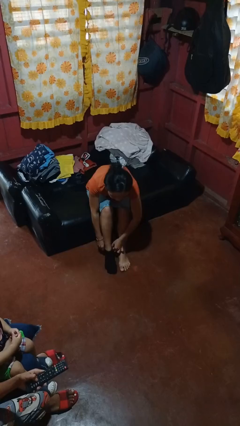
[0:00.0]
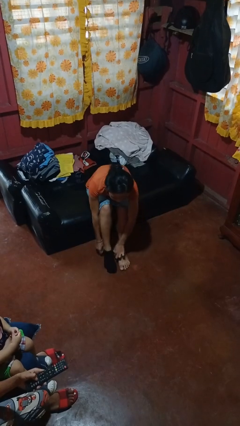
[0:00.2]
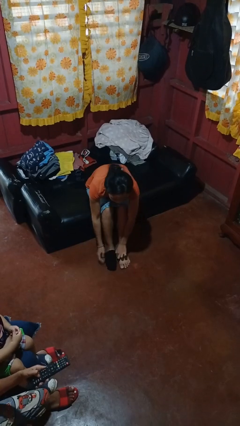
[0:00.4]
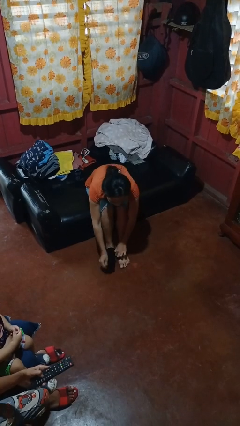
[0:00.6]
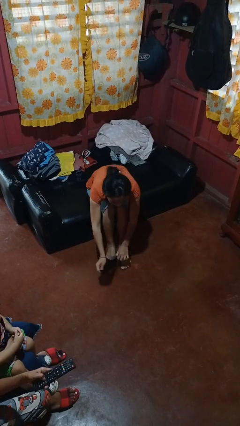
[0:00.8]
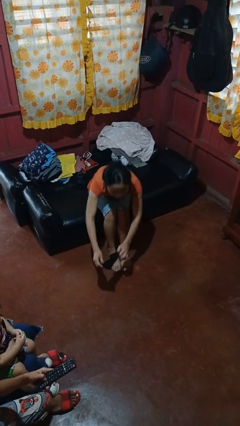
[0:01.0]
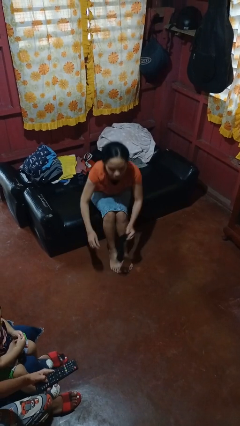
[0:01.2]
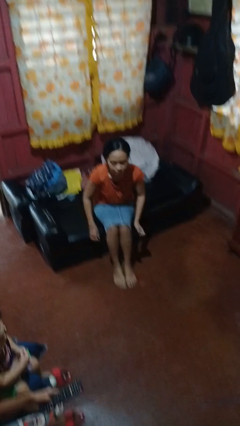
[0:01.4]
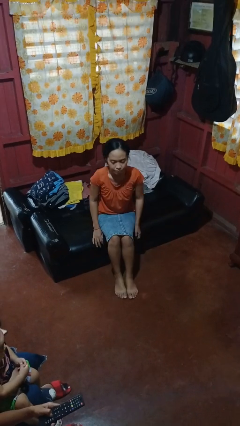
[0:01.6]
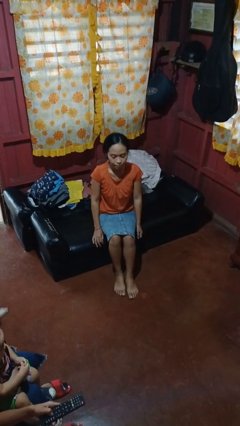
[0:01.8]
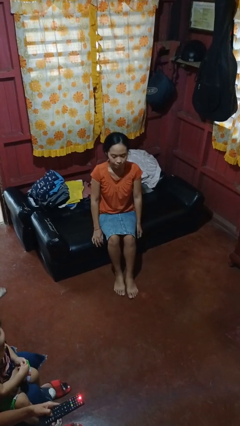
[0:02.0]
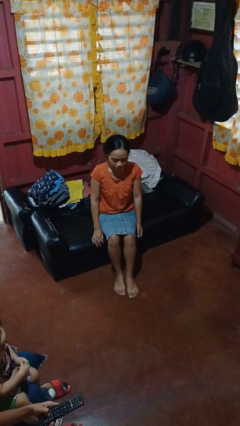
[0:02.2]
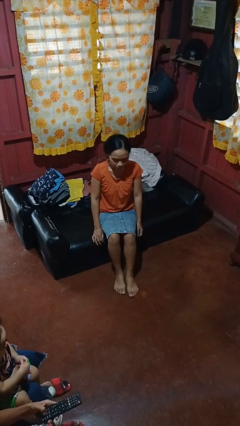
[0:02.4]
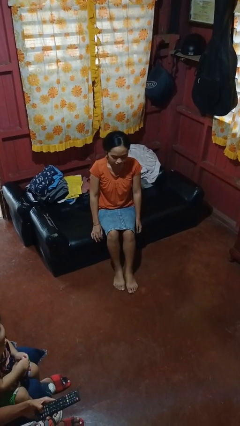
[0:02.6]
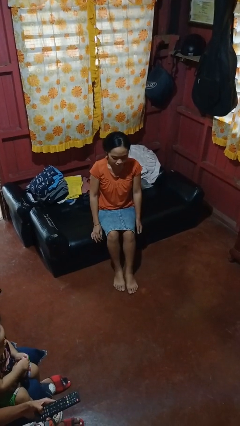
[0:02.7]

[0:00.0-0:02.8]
person takes off socks

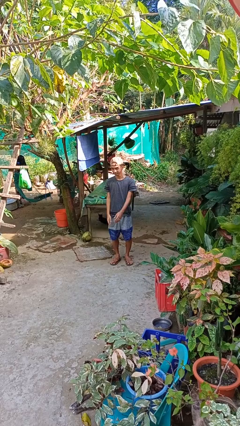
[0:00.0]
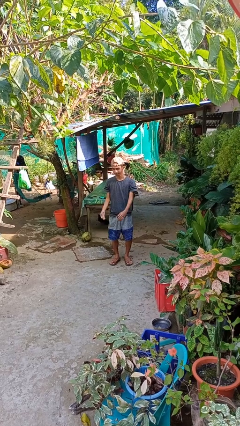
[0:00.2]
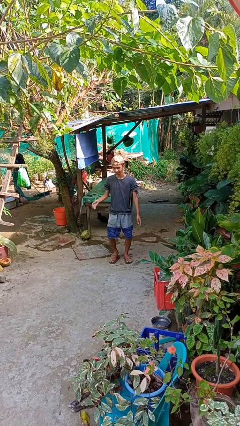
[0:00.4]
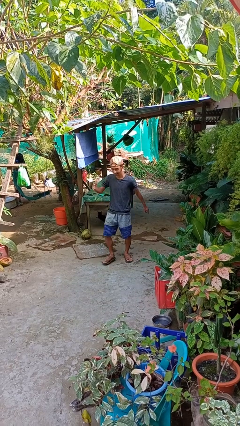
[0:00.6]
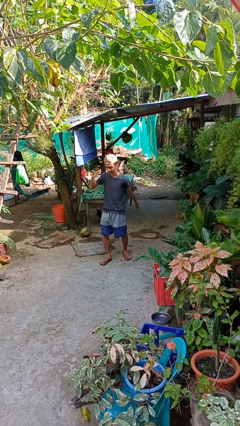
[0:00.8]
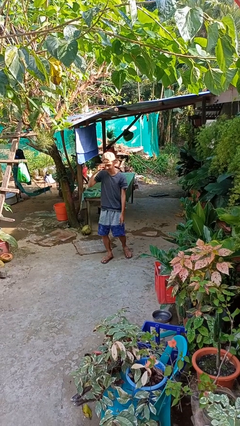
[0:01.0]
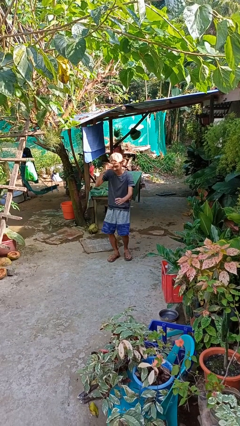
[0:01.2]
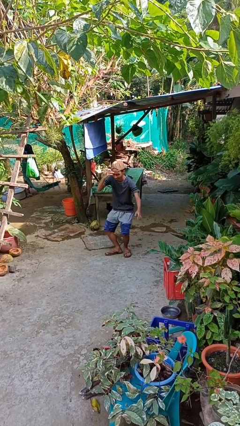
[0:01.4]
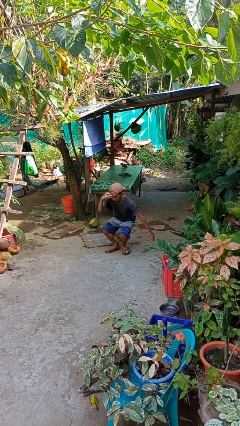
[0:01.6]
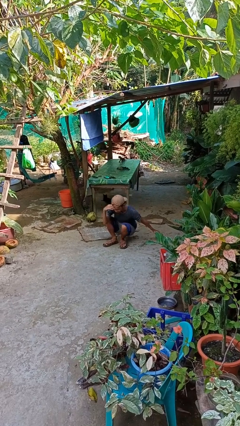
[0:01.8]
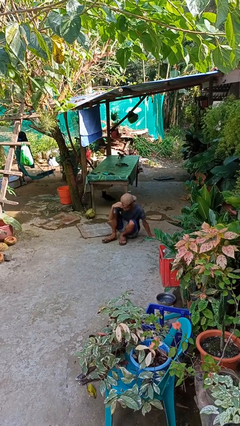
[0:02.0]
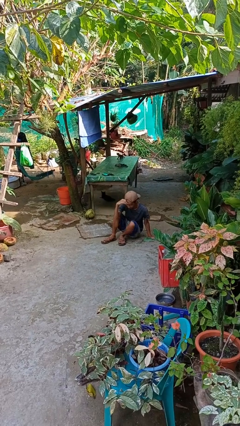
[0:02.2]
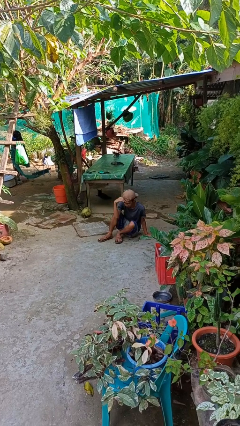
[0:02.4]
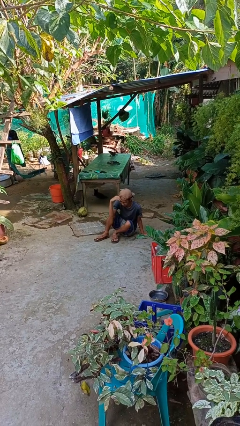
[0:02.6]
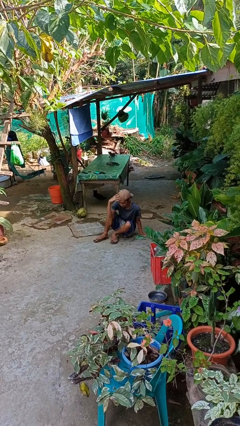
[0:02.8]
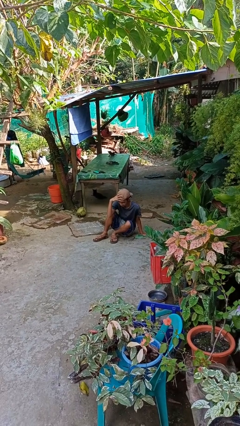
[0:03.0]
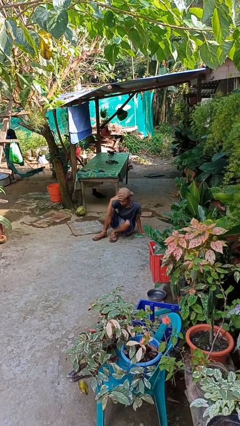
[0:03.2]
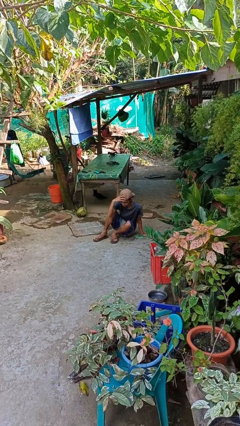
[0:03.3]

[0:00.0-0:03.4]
person falls while standing

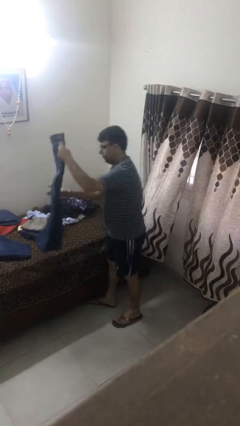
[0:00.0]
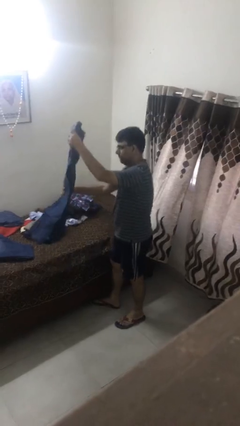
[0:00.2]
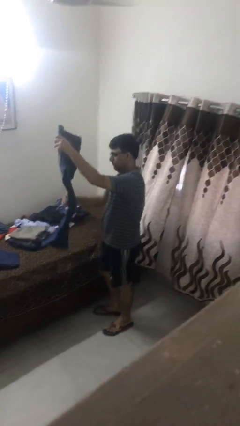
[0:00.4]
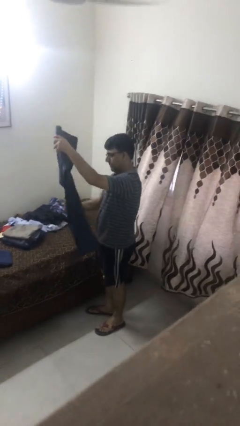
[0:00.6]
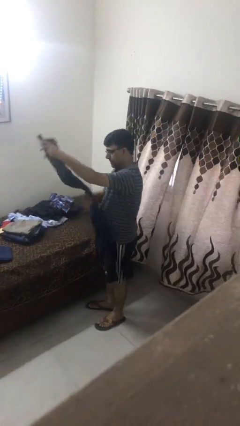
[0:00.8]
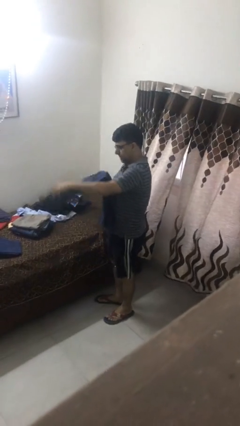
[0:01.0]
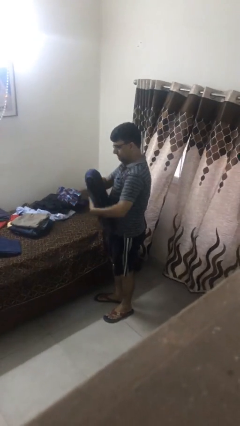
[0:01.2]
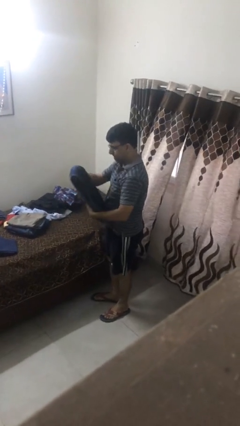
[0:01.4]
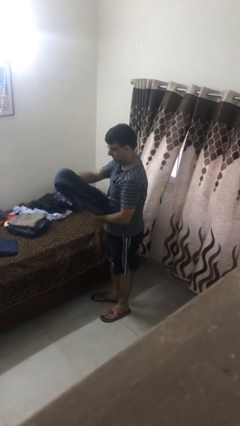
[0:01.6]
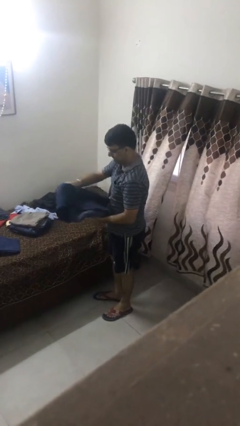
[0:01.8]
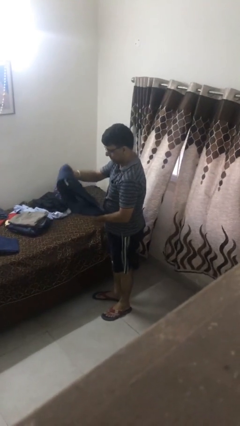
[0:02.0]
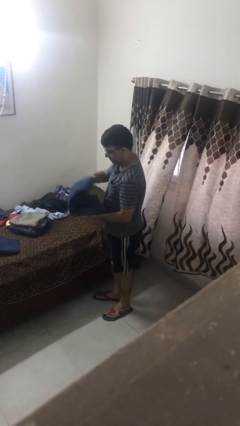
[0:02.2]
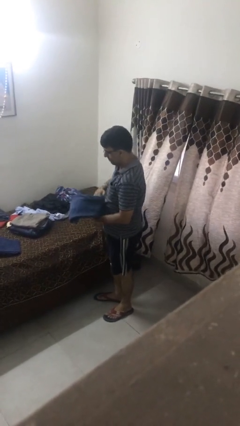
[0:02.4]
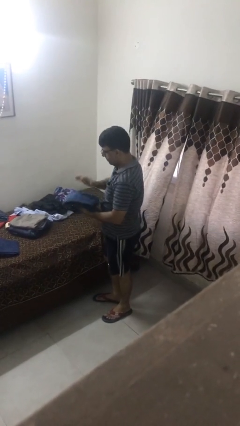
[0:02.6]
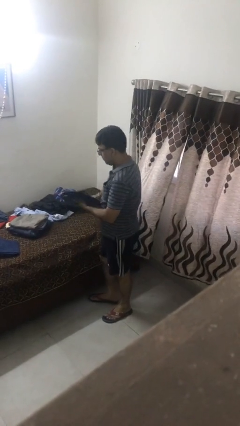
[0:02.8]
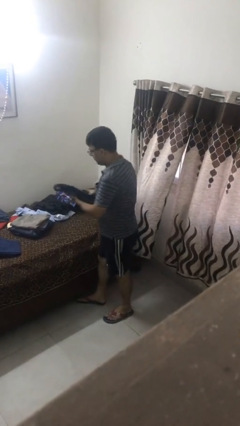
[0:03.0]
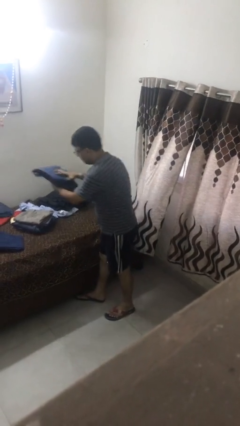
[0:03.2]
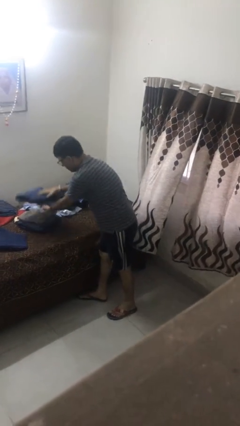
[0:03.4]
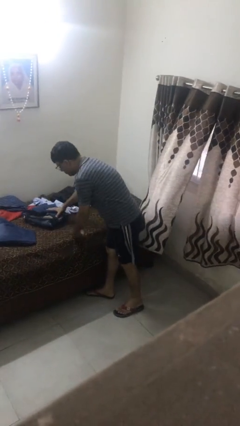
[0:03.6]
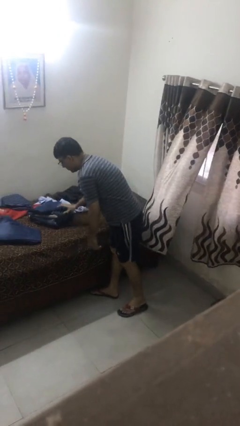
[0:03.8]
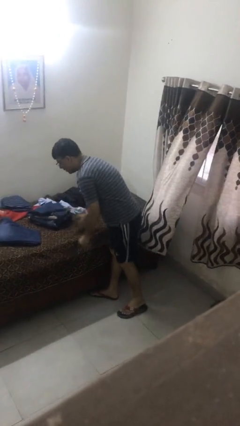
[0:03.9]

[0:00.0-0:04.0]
person folds pants

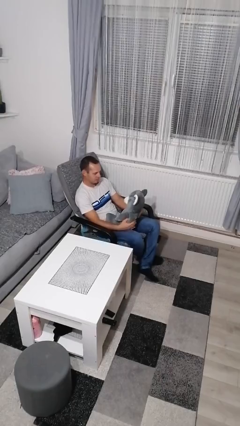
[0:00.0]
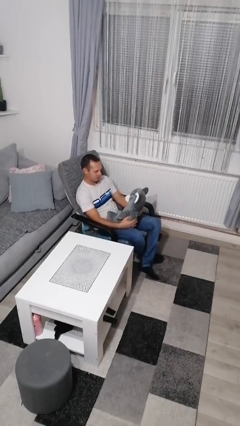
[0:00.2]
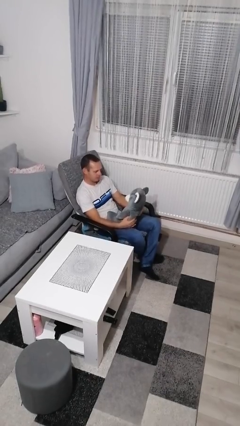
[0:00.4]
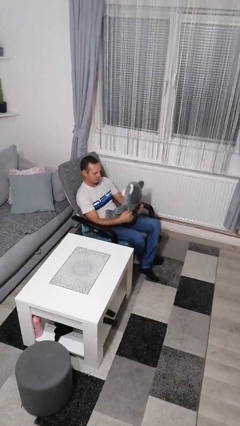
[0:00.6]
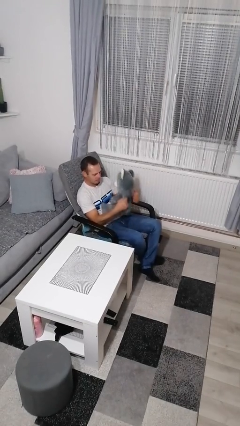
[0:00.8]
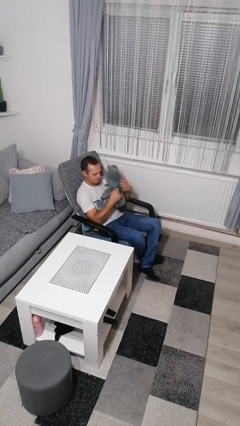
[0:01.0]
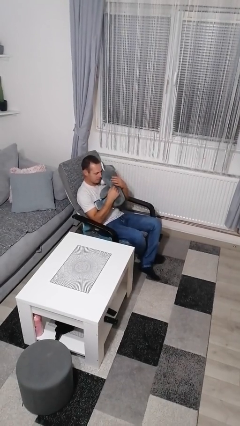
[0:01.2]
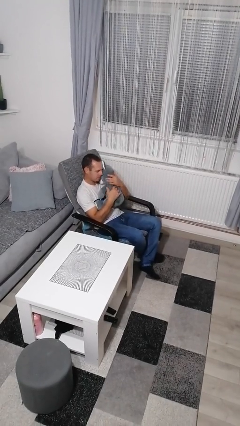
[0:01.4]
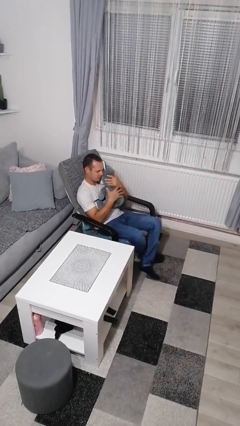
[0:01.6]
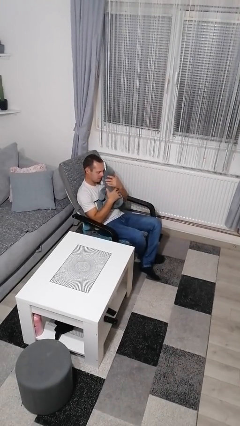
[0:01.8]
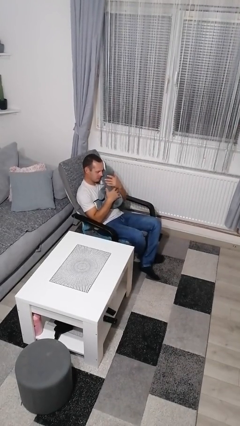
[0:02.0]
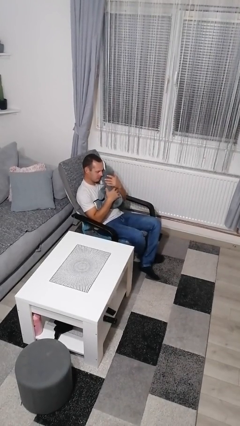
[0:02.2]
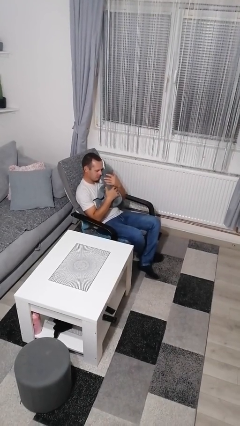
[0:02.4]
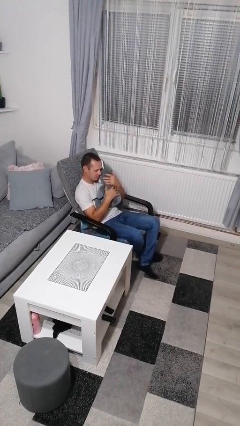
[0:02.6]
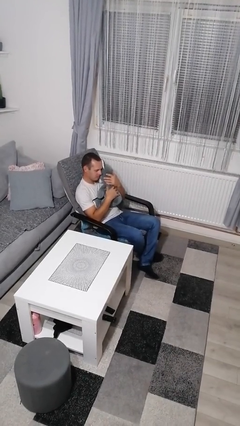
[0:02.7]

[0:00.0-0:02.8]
person hugs stuffed animal

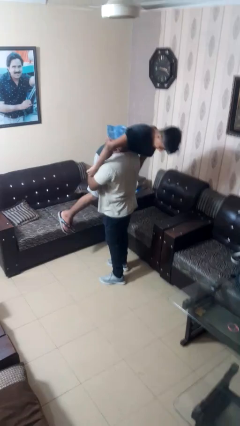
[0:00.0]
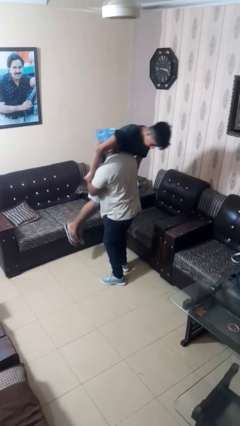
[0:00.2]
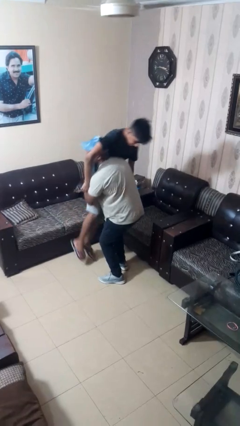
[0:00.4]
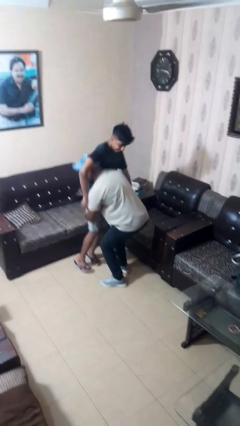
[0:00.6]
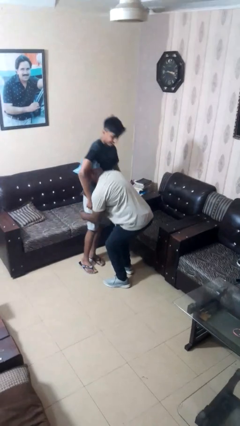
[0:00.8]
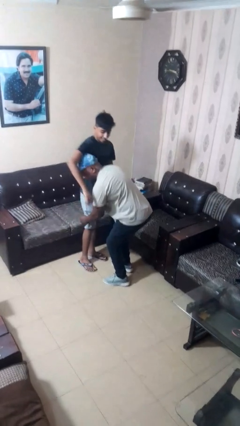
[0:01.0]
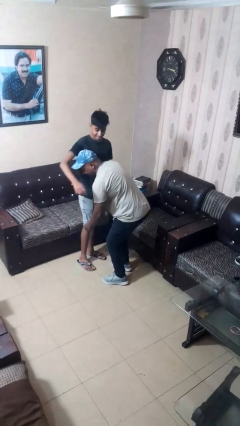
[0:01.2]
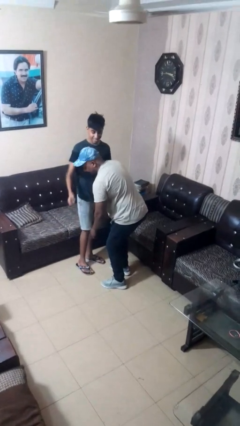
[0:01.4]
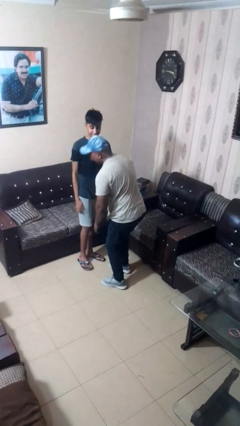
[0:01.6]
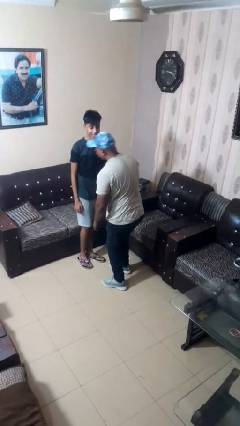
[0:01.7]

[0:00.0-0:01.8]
person puts down person

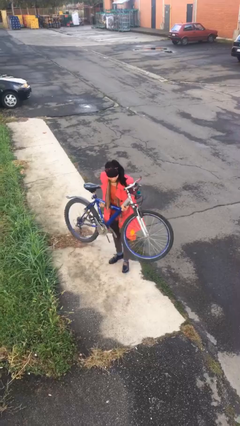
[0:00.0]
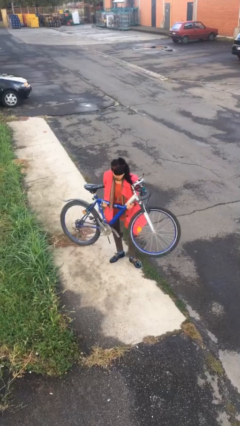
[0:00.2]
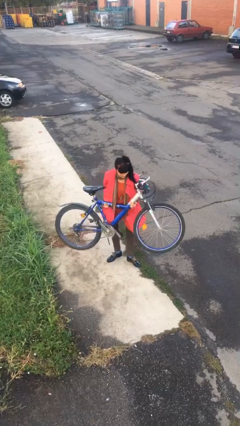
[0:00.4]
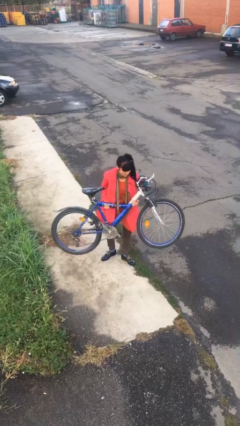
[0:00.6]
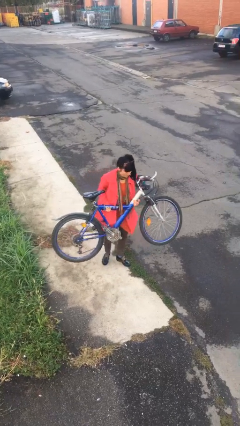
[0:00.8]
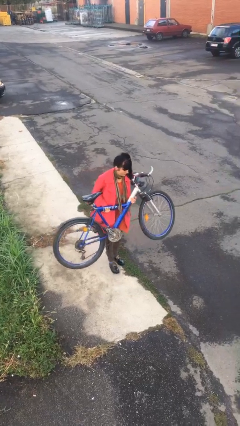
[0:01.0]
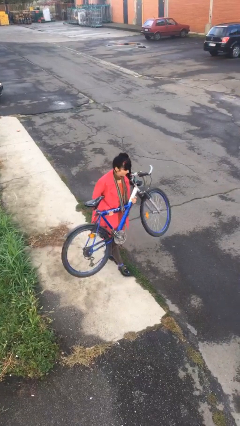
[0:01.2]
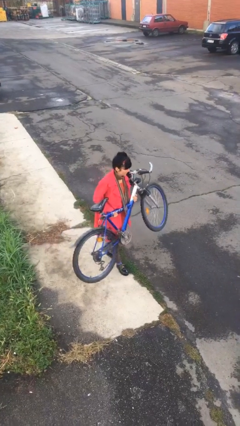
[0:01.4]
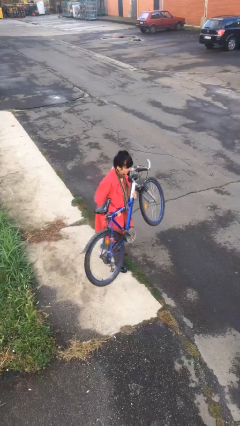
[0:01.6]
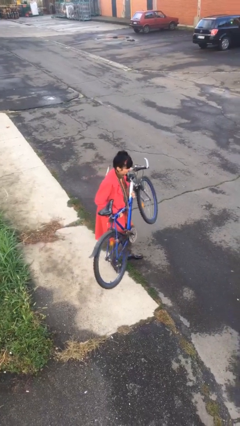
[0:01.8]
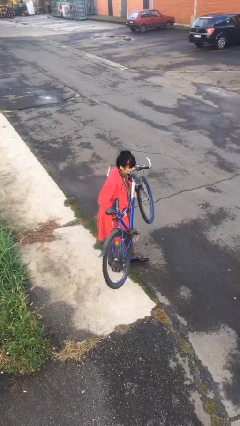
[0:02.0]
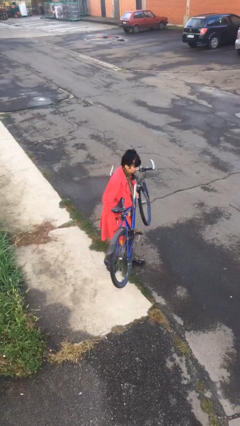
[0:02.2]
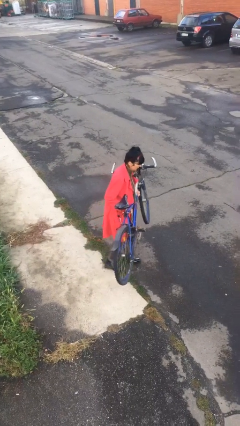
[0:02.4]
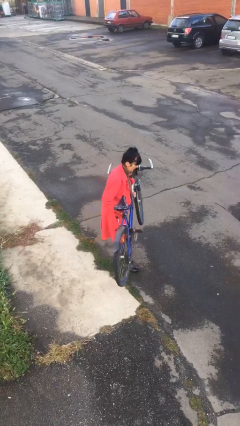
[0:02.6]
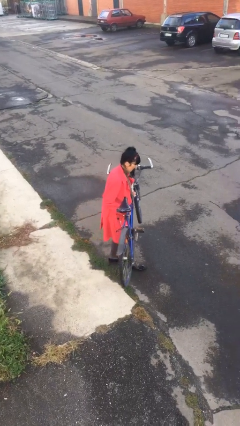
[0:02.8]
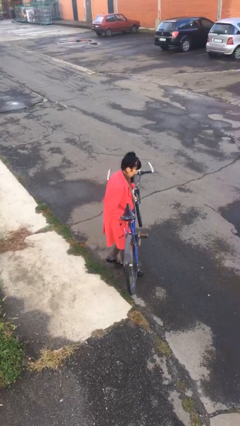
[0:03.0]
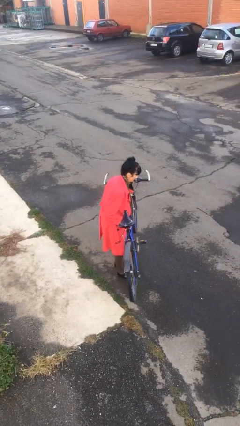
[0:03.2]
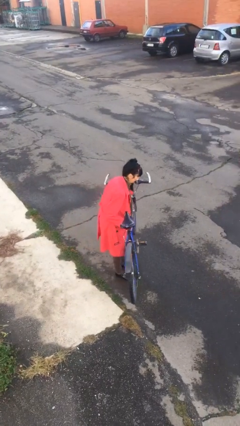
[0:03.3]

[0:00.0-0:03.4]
person carries heavy object
